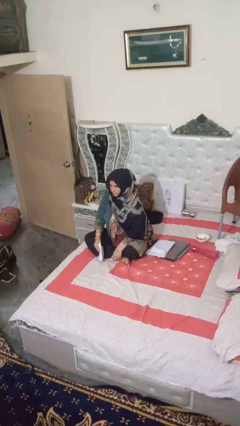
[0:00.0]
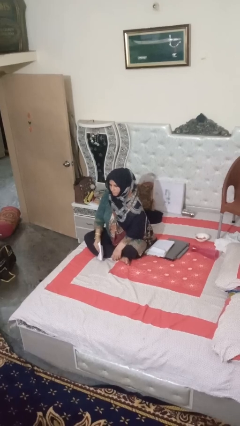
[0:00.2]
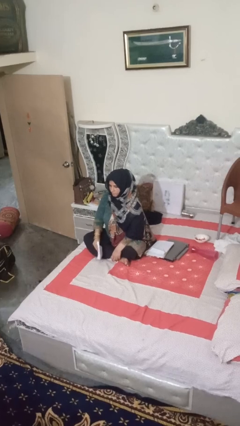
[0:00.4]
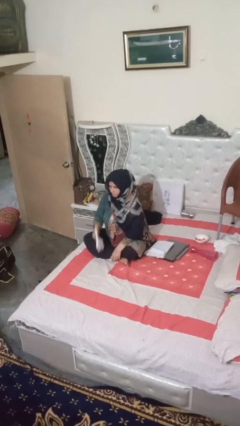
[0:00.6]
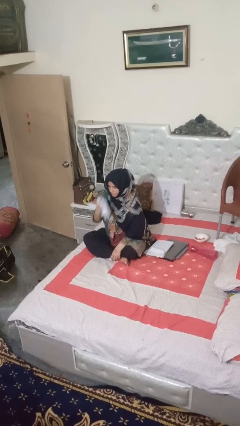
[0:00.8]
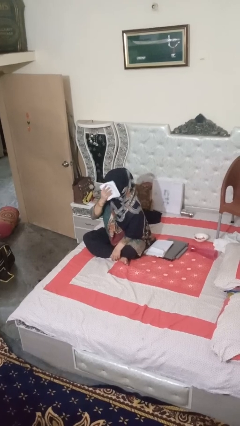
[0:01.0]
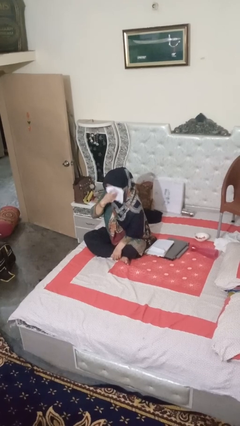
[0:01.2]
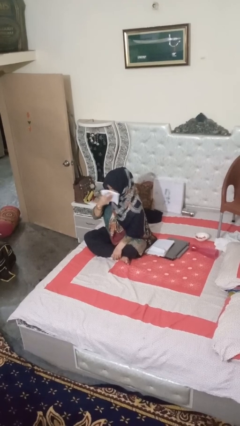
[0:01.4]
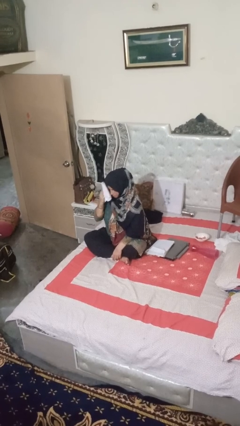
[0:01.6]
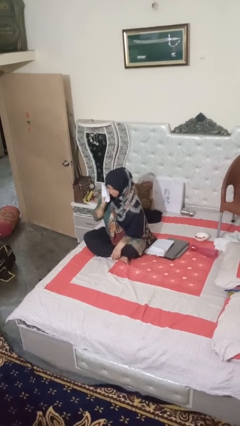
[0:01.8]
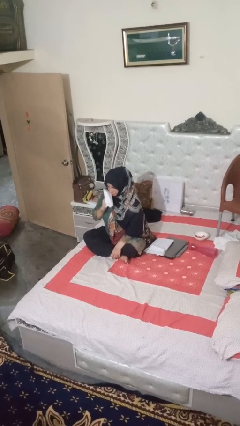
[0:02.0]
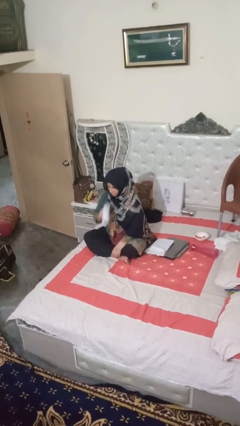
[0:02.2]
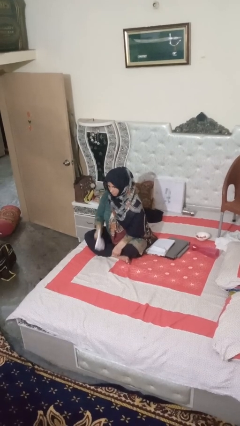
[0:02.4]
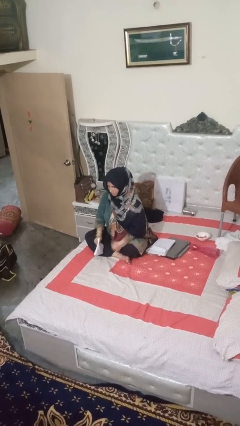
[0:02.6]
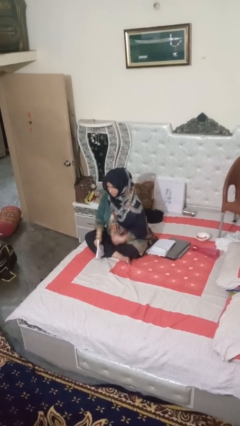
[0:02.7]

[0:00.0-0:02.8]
person wipes mouth with napkin

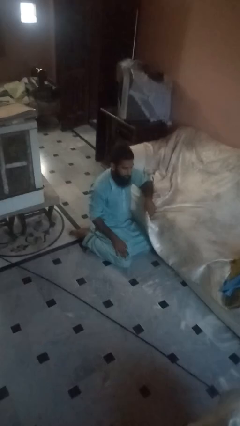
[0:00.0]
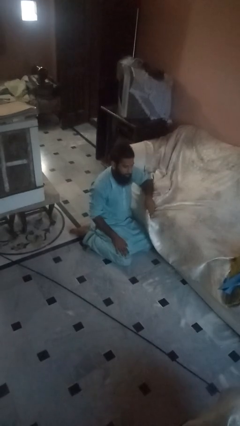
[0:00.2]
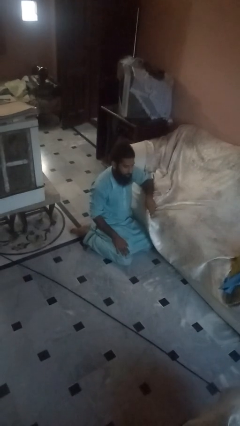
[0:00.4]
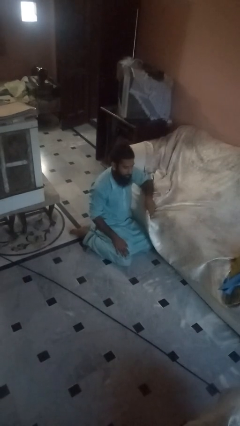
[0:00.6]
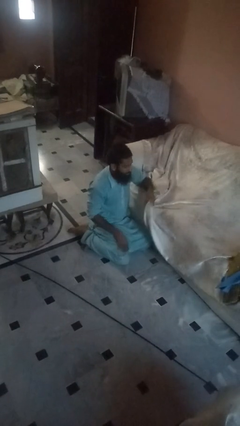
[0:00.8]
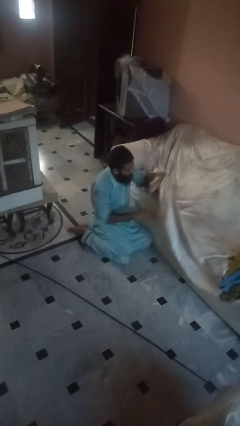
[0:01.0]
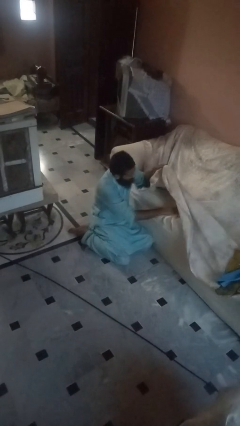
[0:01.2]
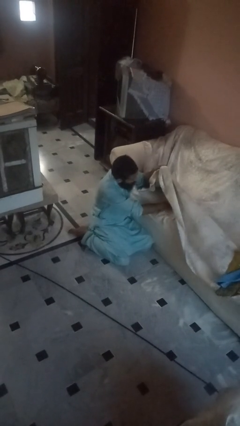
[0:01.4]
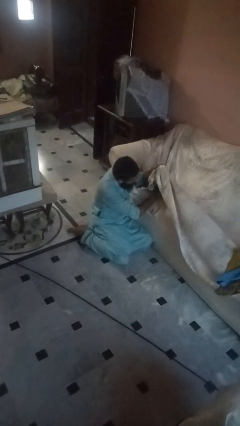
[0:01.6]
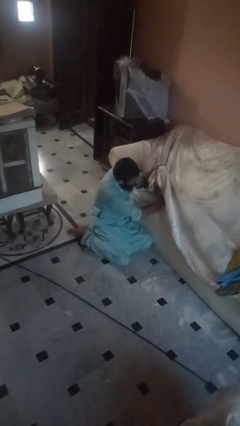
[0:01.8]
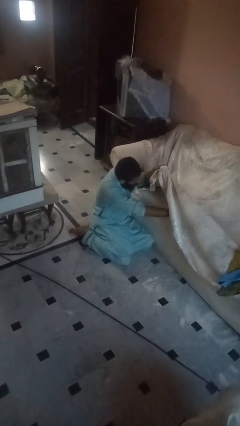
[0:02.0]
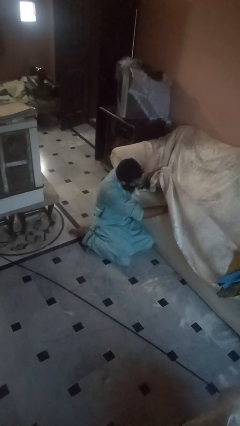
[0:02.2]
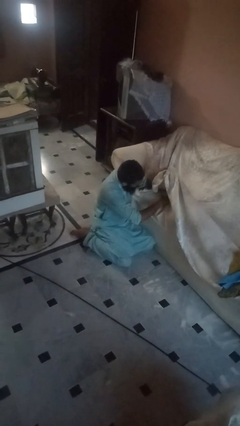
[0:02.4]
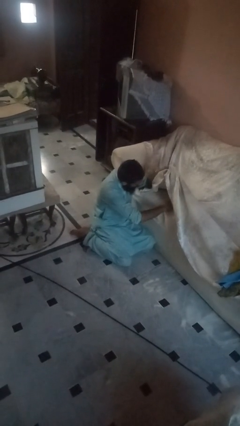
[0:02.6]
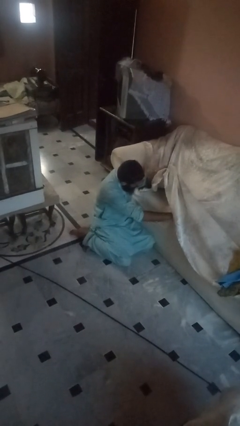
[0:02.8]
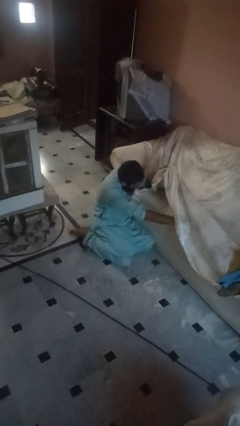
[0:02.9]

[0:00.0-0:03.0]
person searches under couch

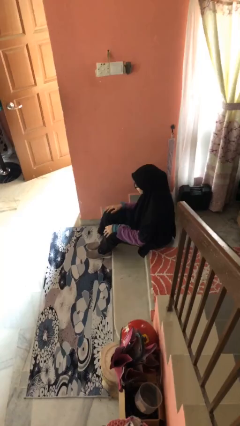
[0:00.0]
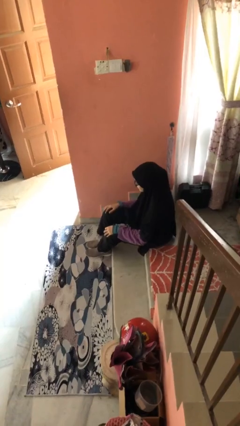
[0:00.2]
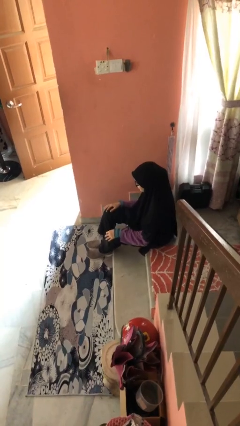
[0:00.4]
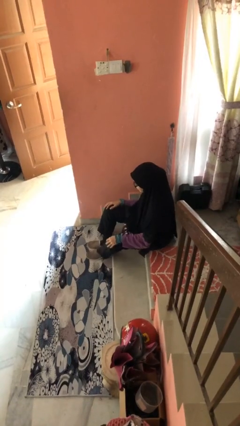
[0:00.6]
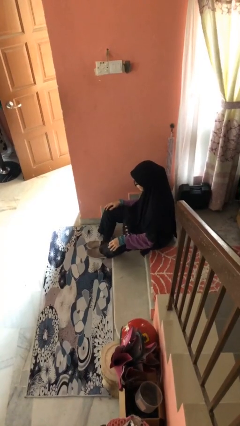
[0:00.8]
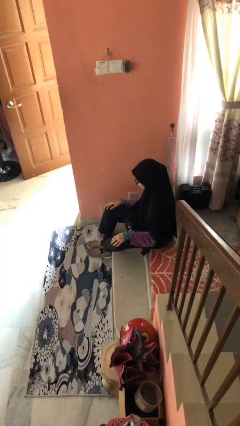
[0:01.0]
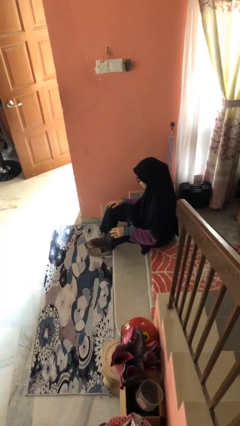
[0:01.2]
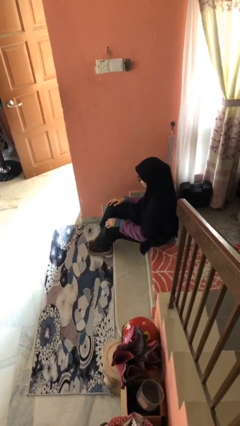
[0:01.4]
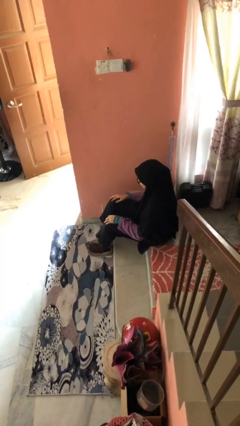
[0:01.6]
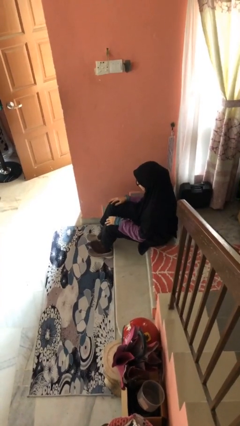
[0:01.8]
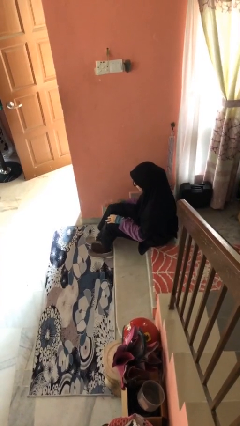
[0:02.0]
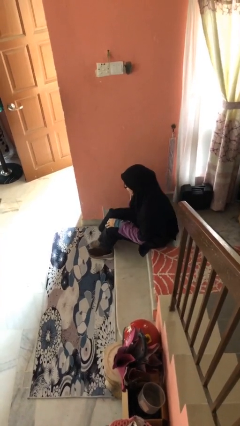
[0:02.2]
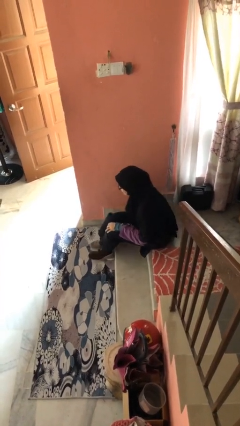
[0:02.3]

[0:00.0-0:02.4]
person takes off shoes

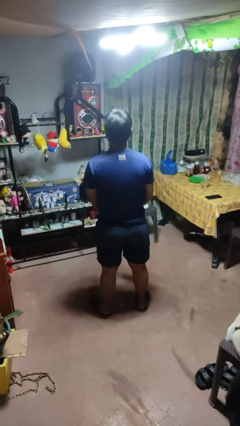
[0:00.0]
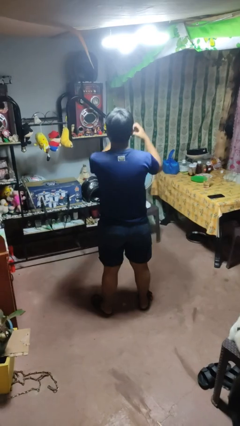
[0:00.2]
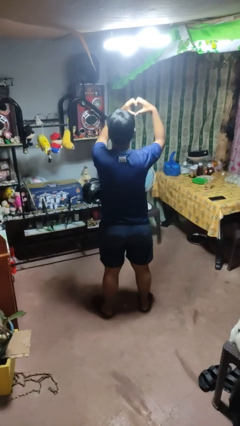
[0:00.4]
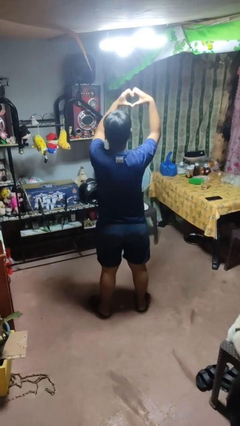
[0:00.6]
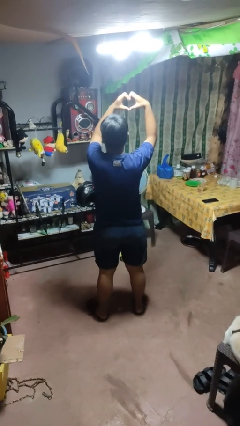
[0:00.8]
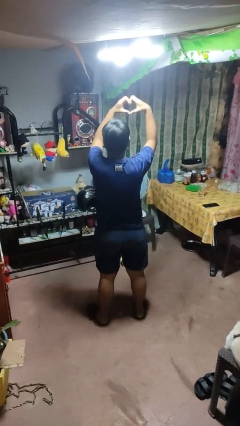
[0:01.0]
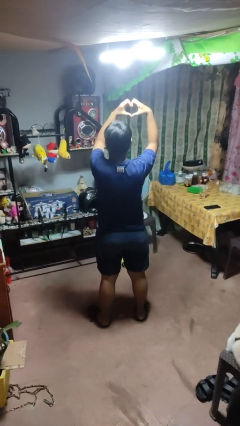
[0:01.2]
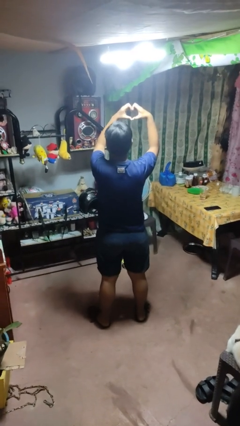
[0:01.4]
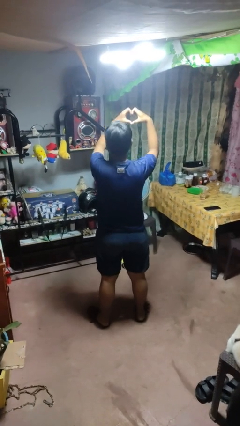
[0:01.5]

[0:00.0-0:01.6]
person gestures heart

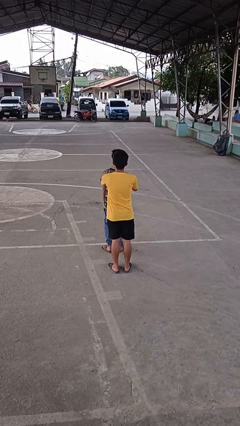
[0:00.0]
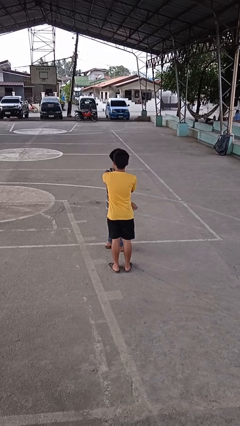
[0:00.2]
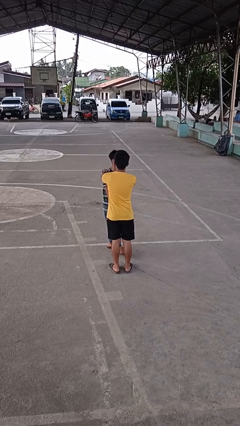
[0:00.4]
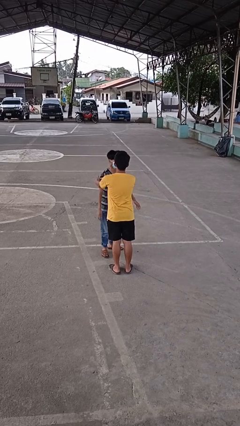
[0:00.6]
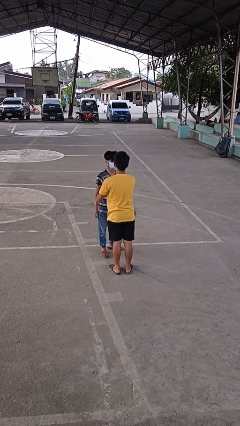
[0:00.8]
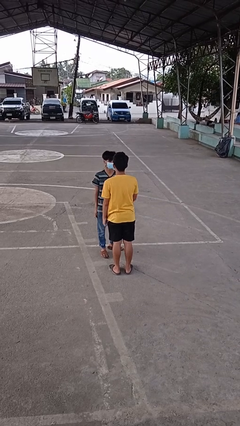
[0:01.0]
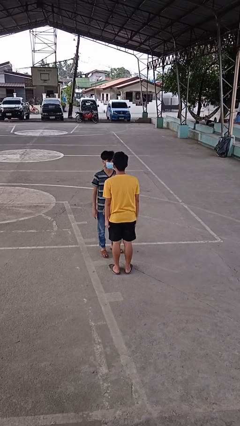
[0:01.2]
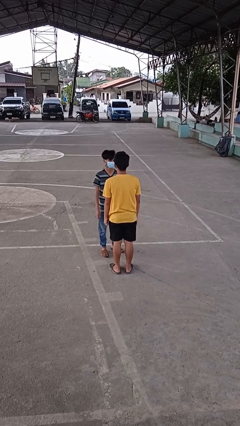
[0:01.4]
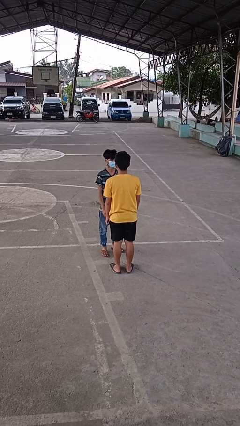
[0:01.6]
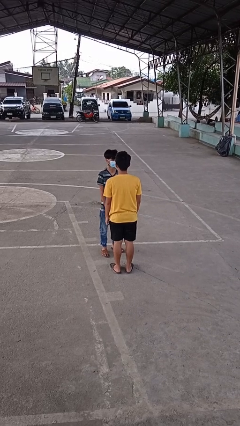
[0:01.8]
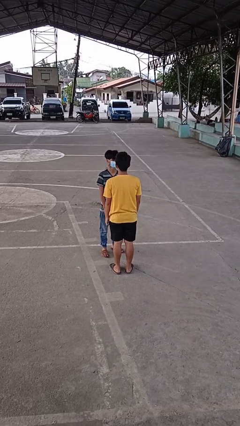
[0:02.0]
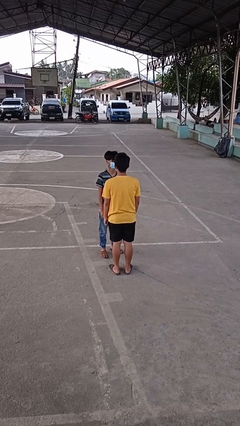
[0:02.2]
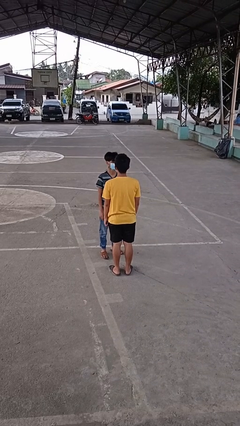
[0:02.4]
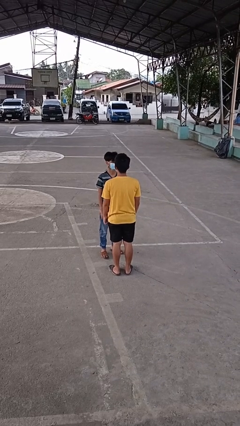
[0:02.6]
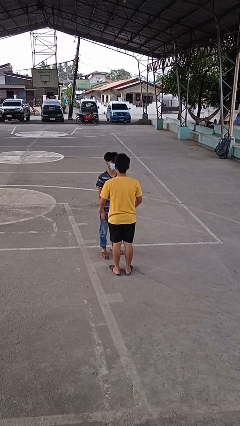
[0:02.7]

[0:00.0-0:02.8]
person spins person around

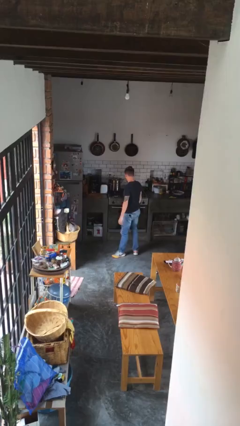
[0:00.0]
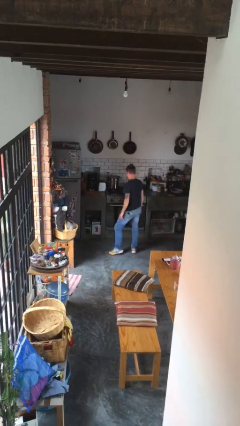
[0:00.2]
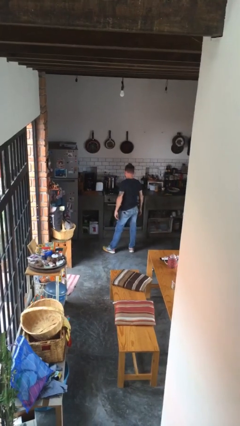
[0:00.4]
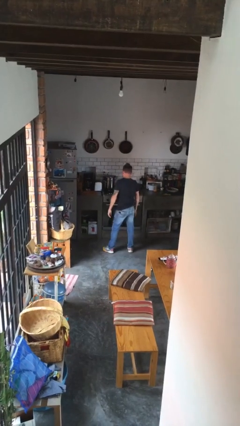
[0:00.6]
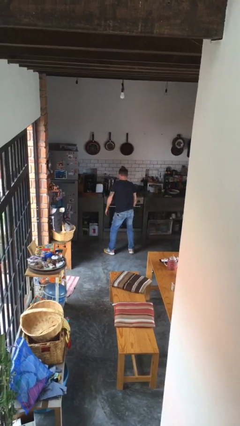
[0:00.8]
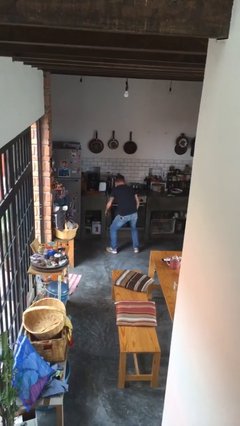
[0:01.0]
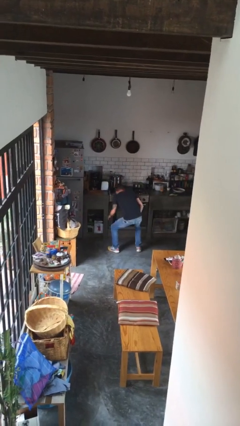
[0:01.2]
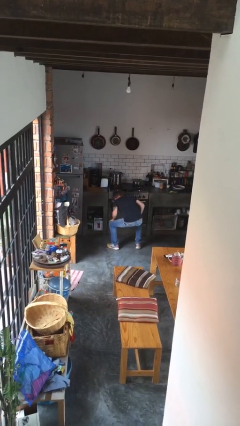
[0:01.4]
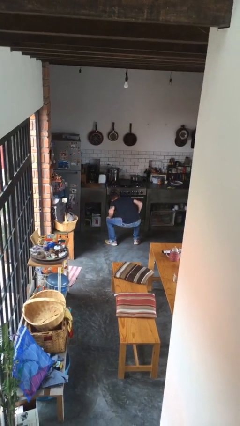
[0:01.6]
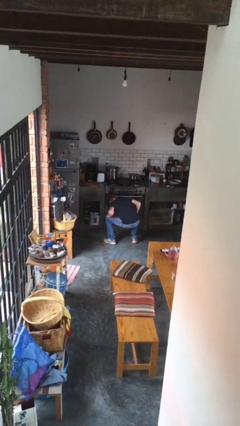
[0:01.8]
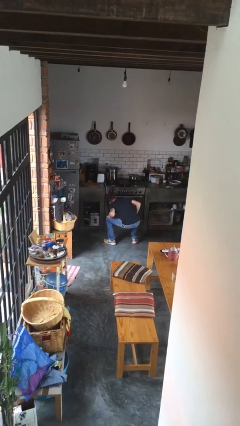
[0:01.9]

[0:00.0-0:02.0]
person squats

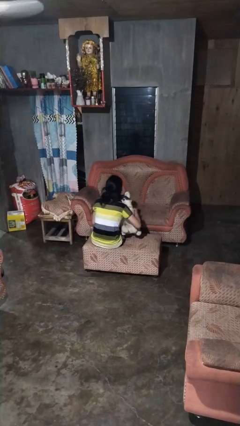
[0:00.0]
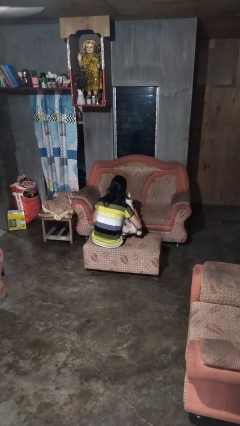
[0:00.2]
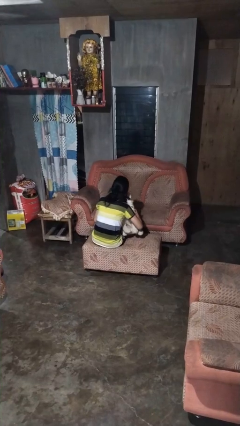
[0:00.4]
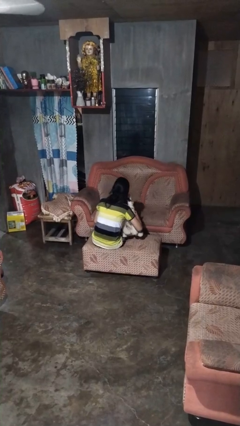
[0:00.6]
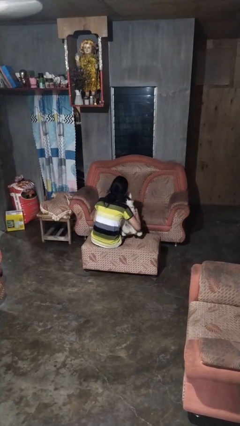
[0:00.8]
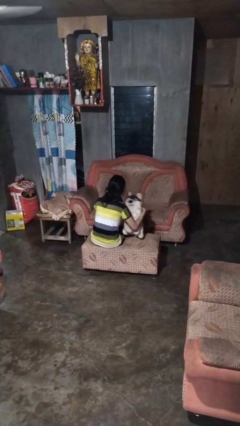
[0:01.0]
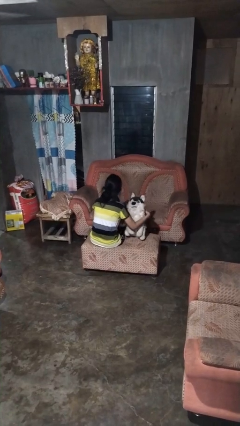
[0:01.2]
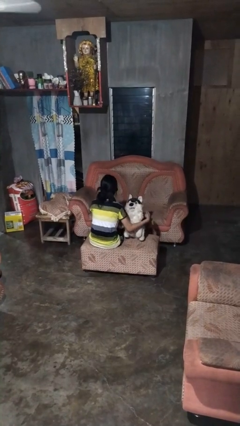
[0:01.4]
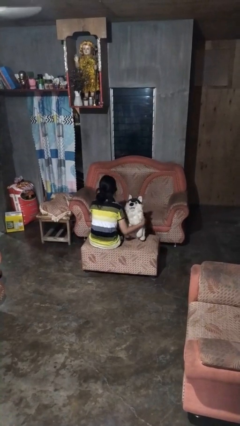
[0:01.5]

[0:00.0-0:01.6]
person hugs stuffed animal

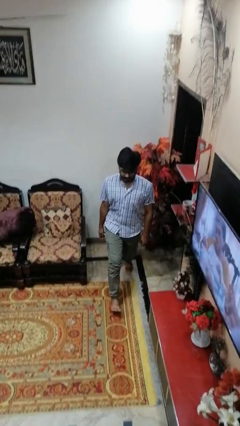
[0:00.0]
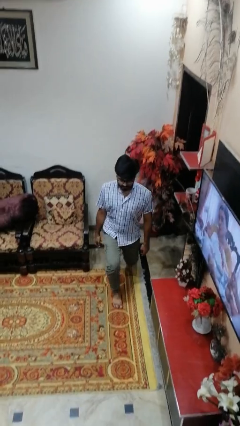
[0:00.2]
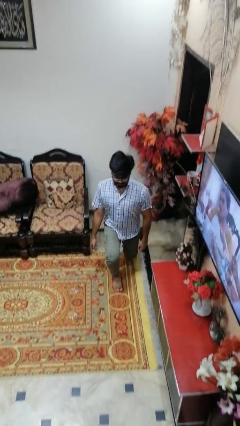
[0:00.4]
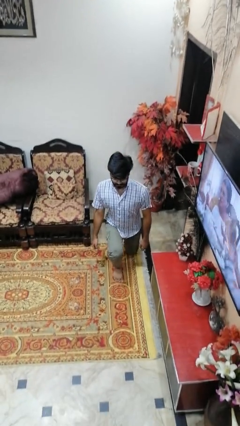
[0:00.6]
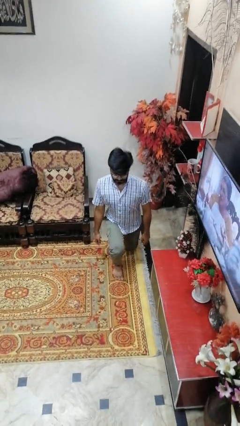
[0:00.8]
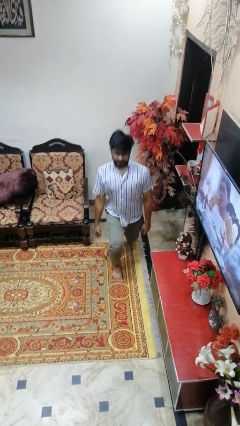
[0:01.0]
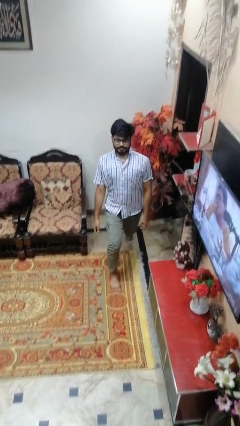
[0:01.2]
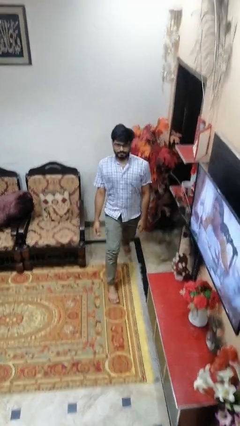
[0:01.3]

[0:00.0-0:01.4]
person exercises with lunges
